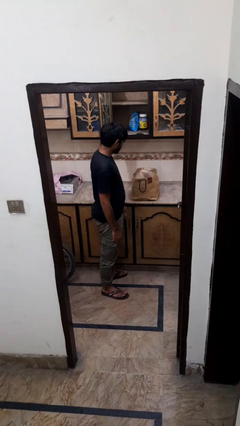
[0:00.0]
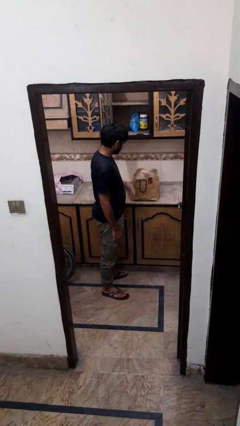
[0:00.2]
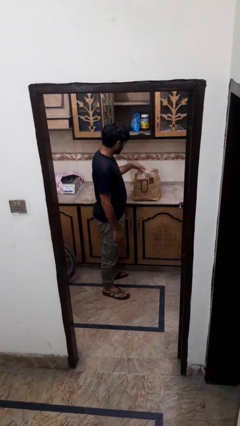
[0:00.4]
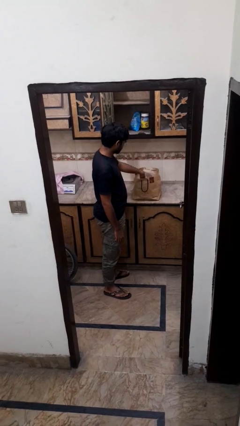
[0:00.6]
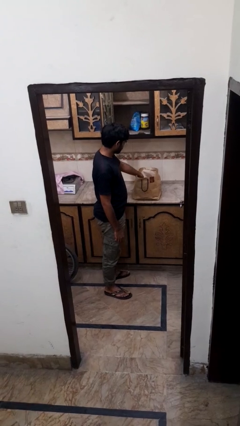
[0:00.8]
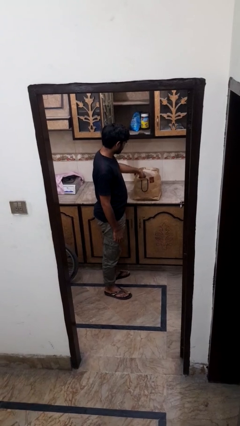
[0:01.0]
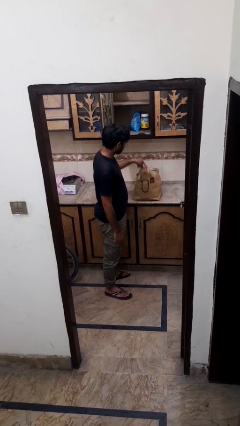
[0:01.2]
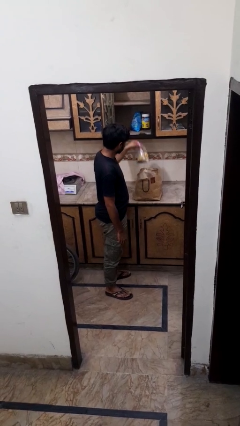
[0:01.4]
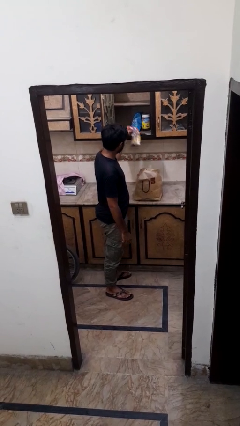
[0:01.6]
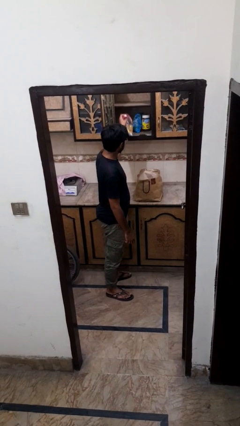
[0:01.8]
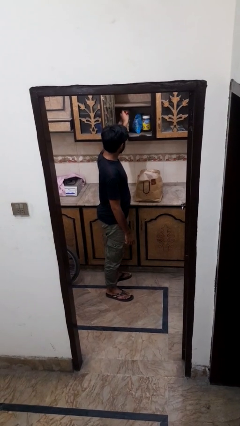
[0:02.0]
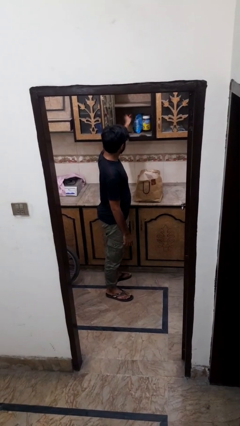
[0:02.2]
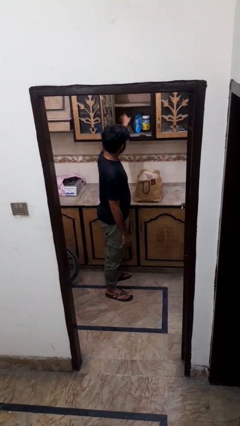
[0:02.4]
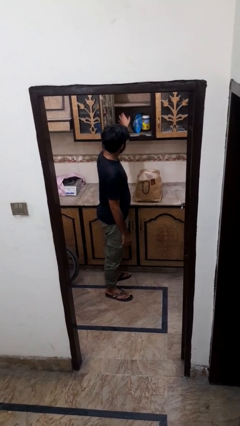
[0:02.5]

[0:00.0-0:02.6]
person loads groceries into cabinet

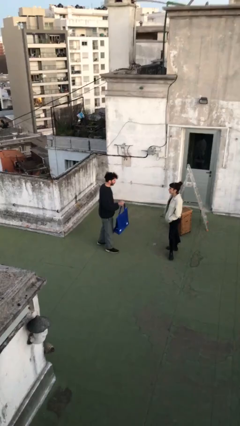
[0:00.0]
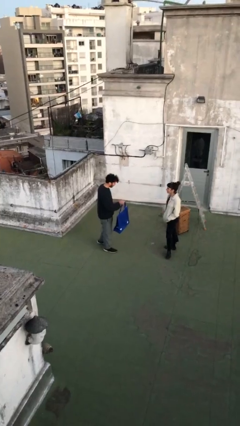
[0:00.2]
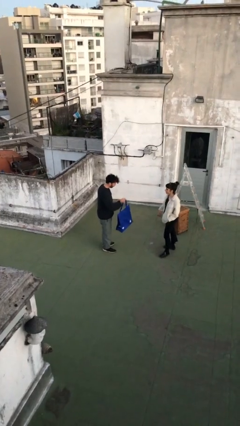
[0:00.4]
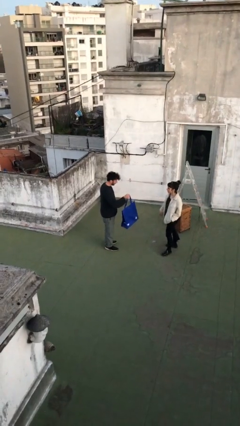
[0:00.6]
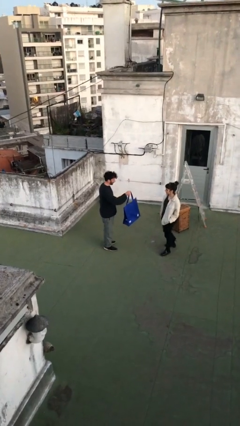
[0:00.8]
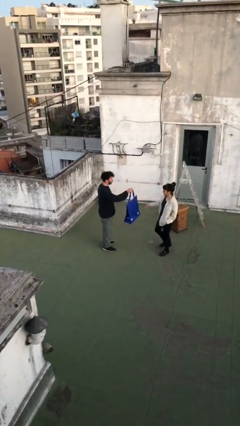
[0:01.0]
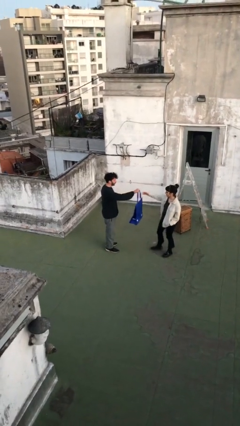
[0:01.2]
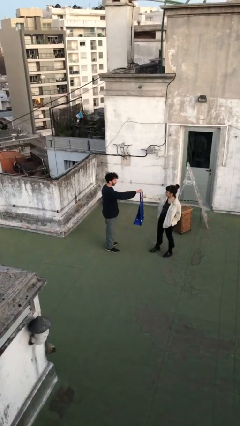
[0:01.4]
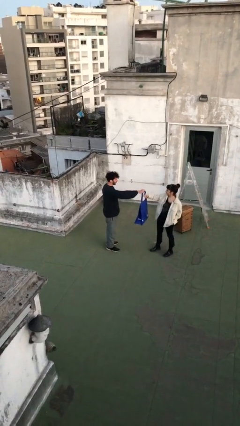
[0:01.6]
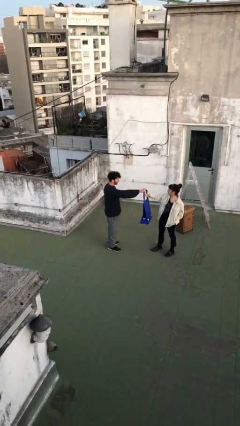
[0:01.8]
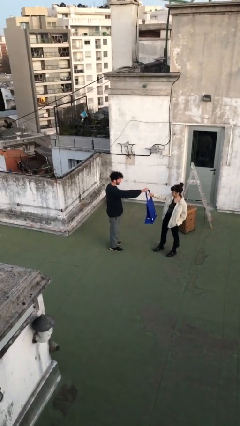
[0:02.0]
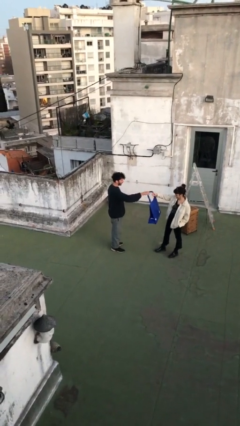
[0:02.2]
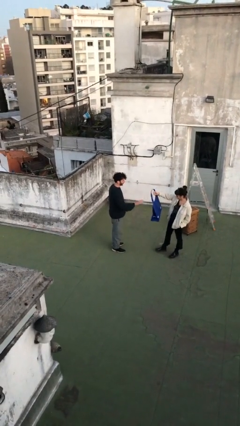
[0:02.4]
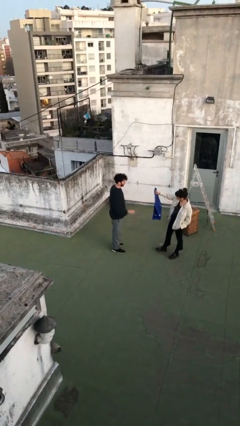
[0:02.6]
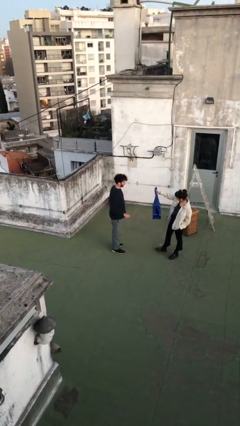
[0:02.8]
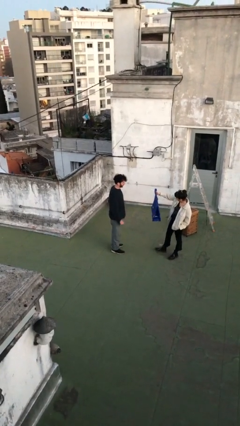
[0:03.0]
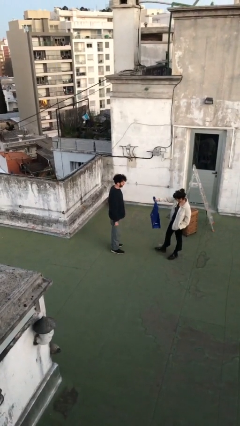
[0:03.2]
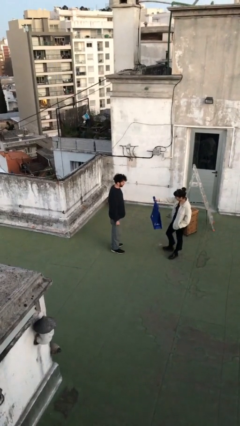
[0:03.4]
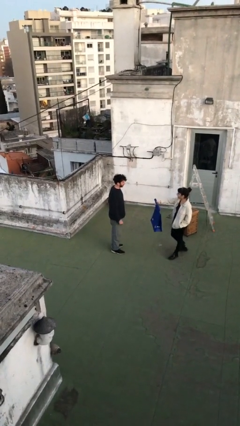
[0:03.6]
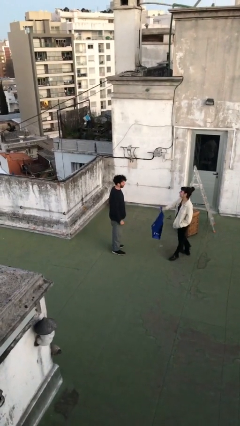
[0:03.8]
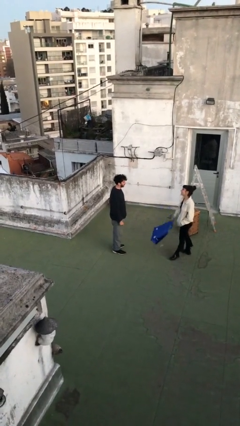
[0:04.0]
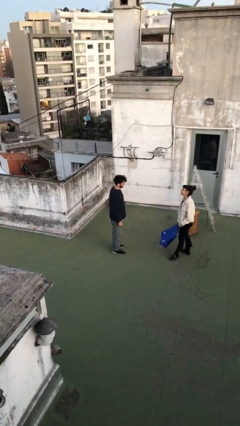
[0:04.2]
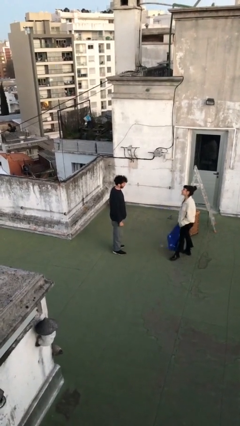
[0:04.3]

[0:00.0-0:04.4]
person transfers object to person

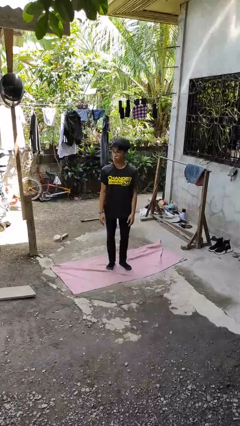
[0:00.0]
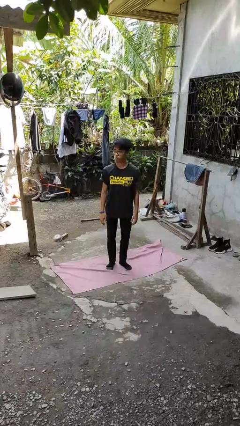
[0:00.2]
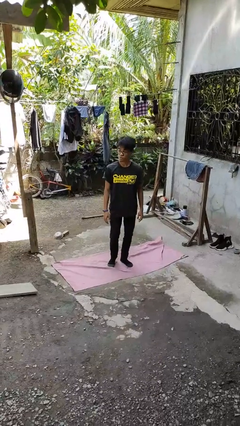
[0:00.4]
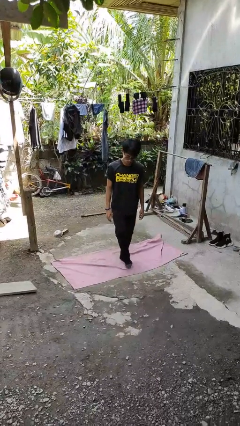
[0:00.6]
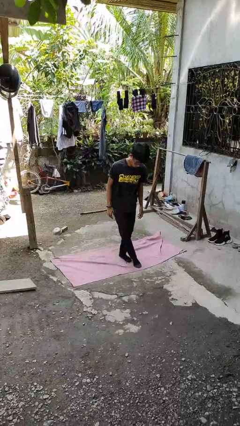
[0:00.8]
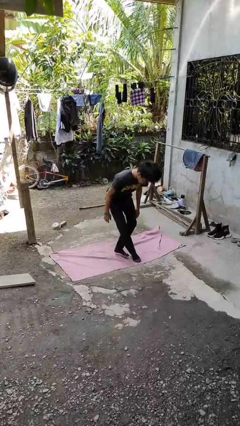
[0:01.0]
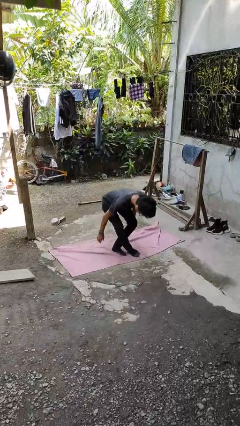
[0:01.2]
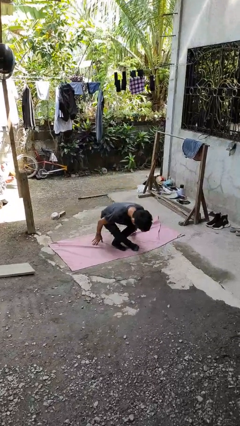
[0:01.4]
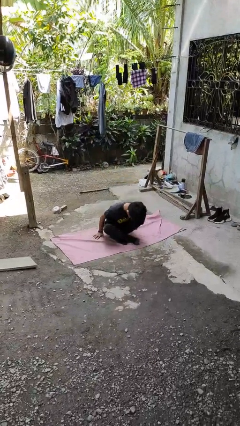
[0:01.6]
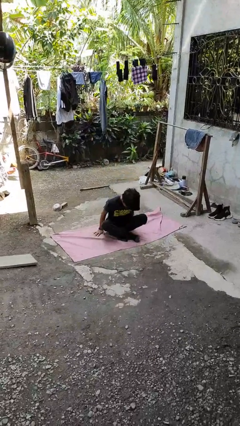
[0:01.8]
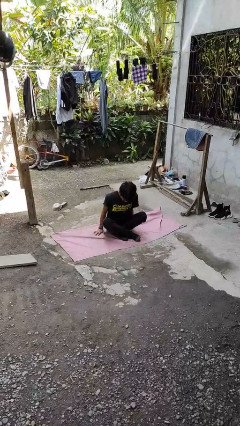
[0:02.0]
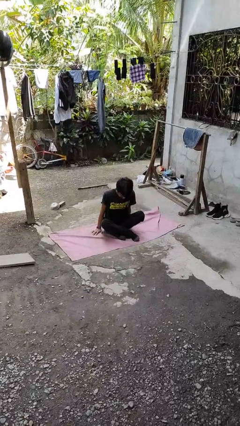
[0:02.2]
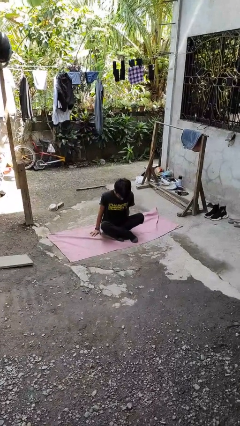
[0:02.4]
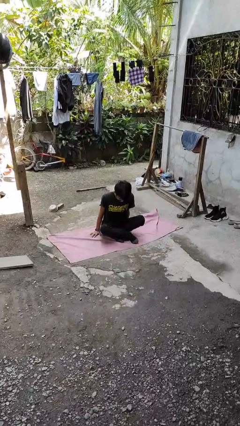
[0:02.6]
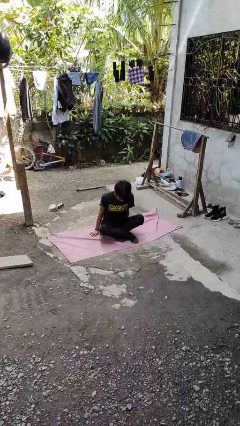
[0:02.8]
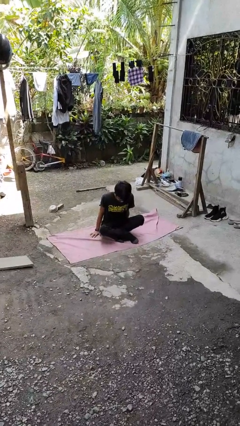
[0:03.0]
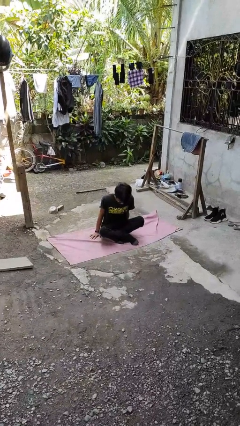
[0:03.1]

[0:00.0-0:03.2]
person sits crisscross

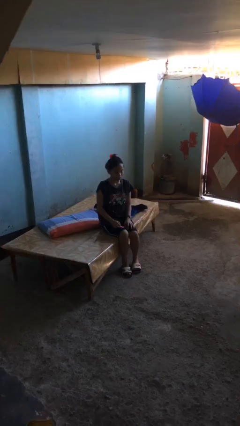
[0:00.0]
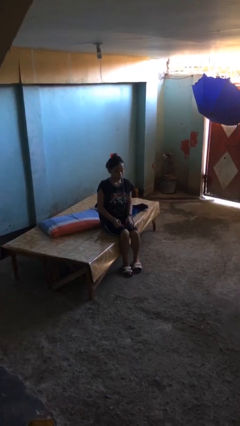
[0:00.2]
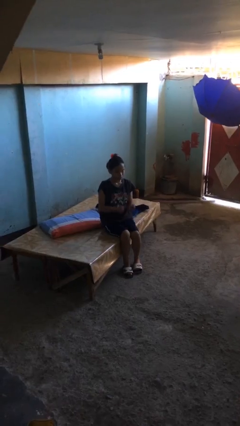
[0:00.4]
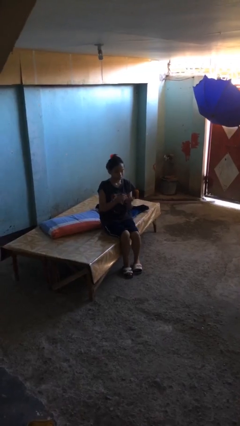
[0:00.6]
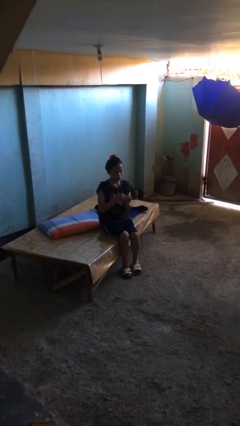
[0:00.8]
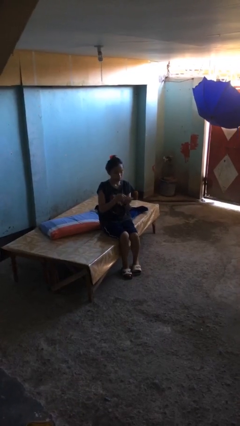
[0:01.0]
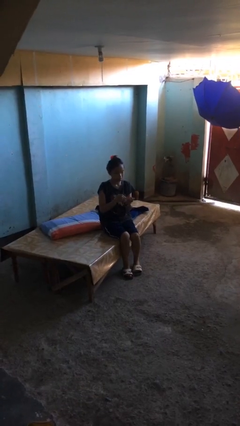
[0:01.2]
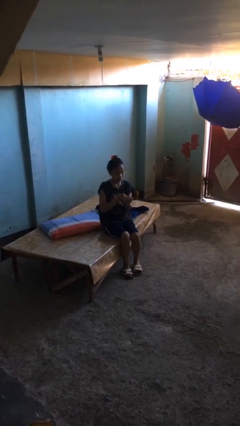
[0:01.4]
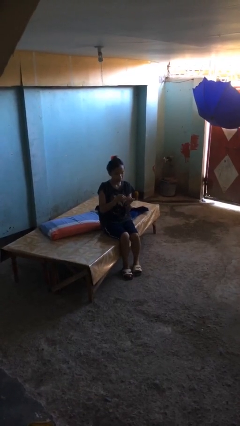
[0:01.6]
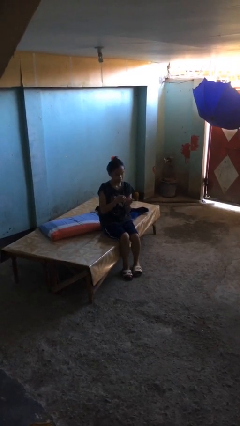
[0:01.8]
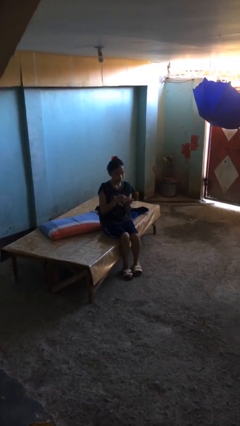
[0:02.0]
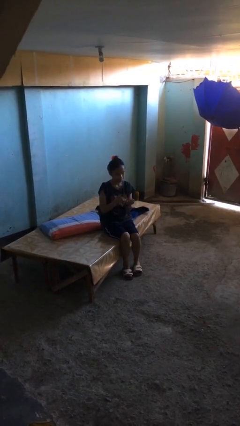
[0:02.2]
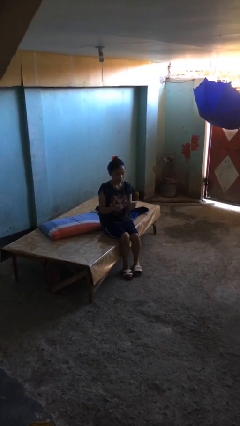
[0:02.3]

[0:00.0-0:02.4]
person files fingernails

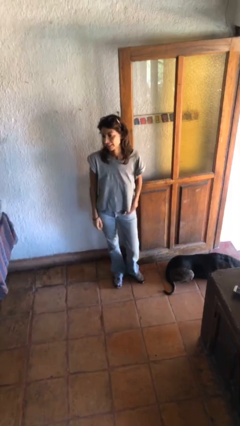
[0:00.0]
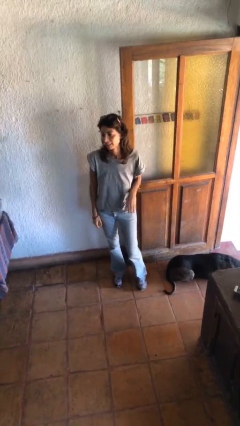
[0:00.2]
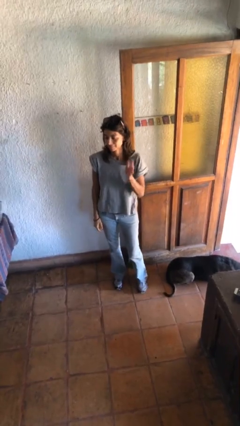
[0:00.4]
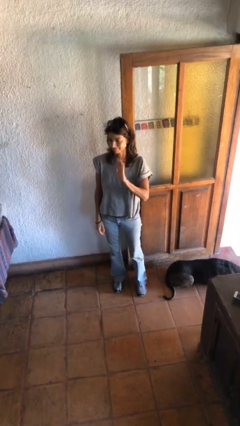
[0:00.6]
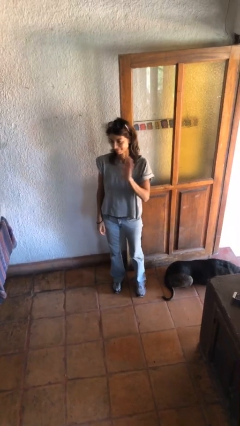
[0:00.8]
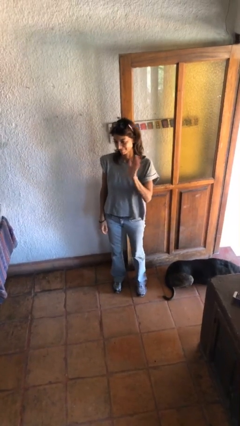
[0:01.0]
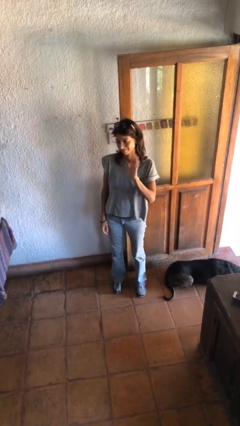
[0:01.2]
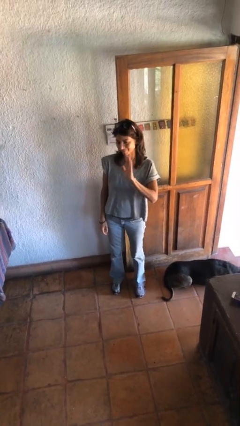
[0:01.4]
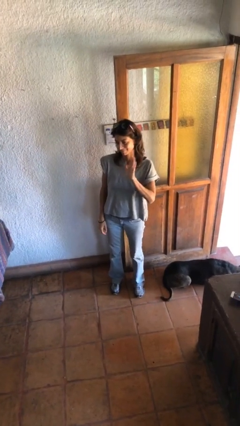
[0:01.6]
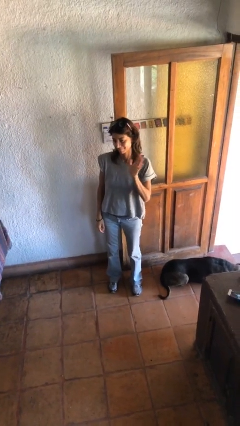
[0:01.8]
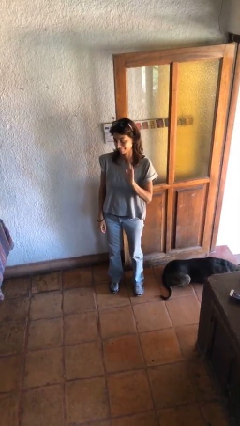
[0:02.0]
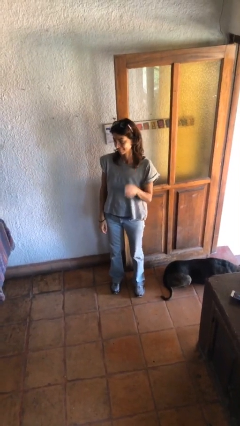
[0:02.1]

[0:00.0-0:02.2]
person waves at person

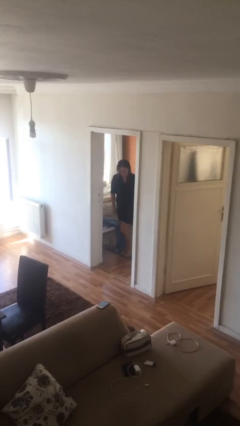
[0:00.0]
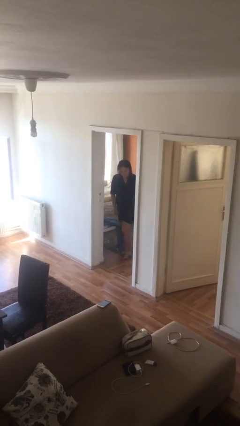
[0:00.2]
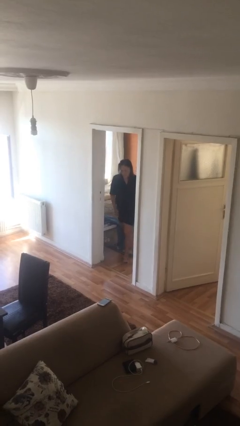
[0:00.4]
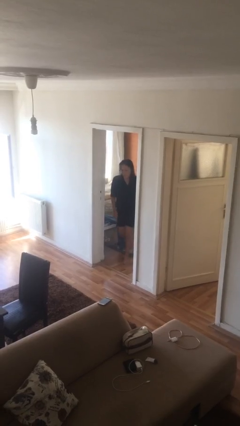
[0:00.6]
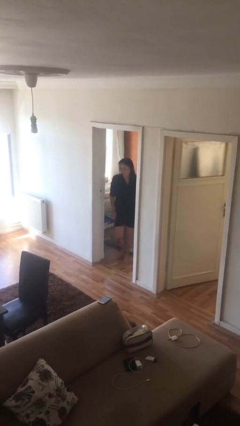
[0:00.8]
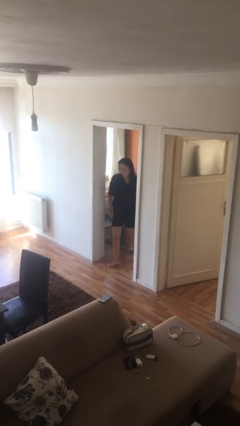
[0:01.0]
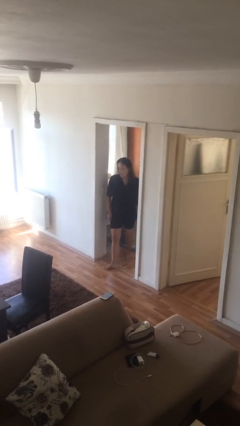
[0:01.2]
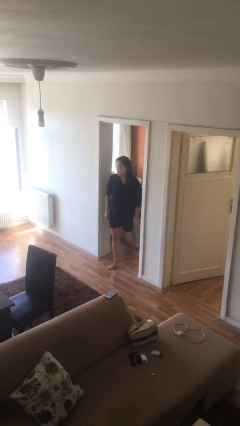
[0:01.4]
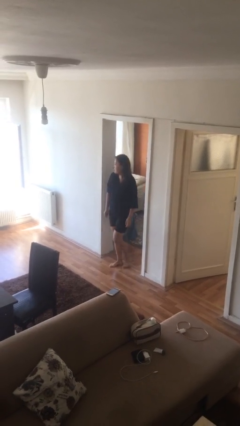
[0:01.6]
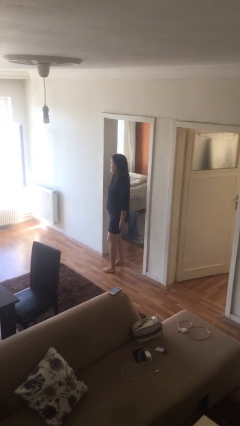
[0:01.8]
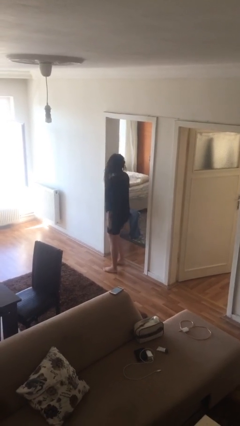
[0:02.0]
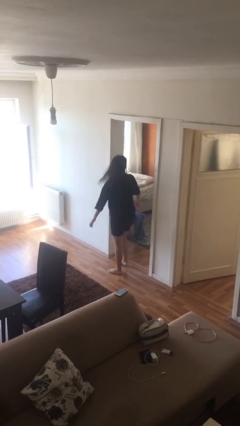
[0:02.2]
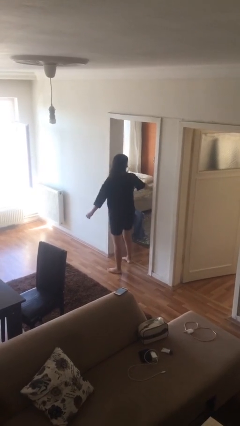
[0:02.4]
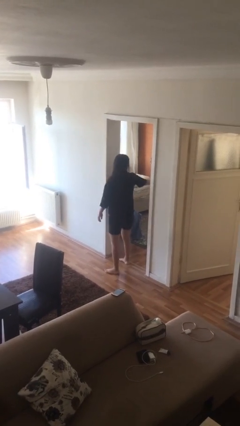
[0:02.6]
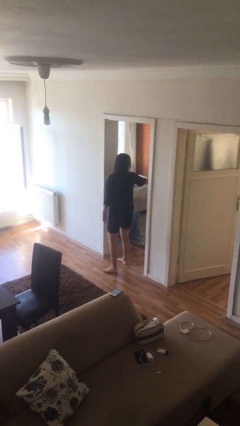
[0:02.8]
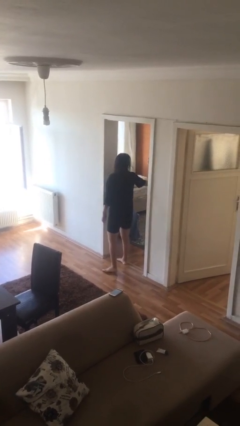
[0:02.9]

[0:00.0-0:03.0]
person enters scene through structure

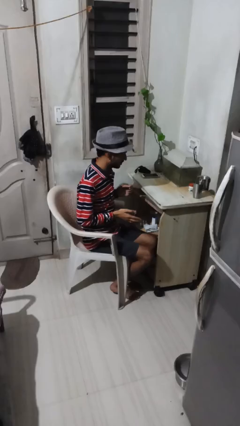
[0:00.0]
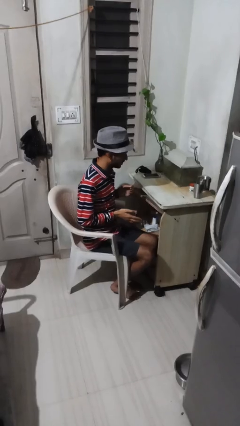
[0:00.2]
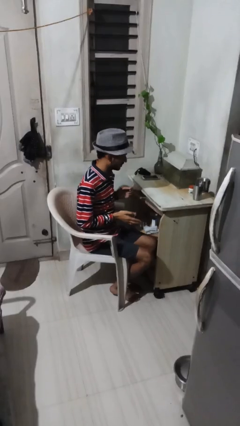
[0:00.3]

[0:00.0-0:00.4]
person claps hands
